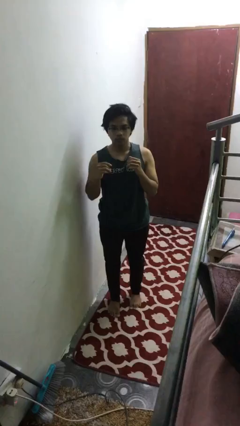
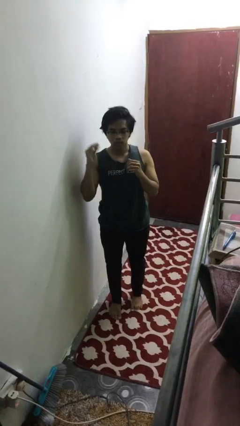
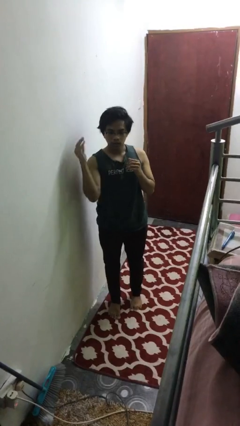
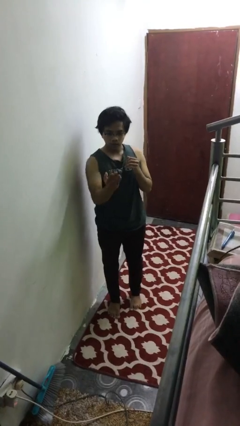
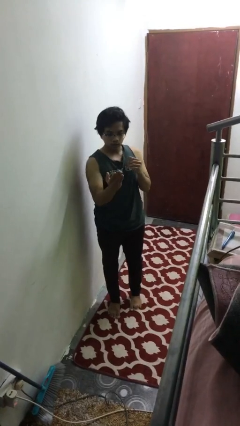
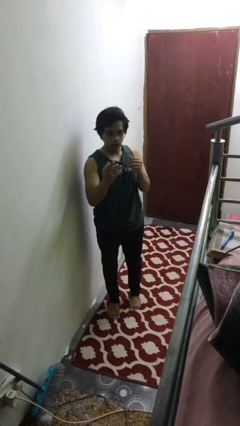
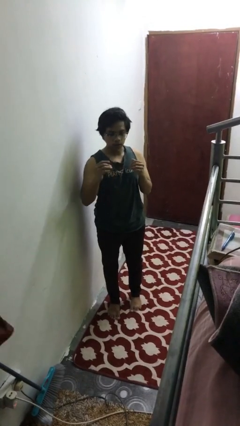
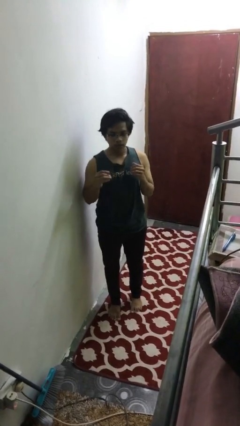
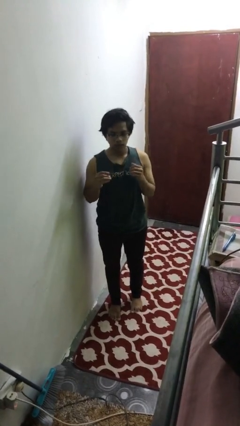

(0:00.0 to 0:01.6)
person karate chop

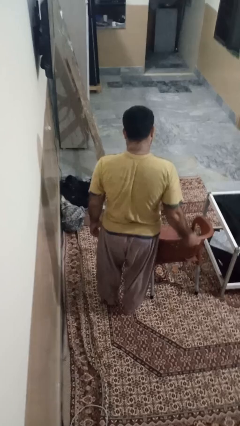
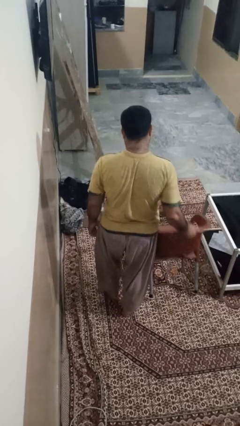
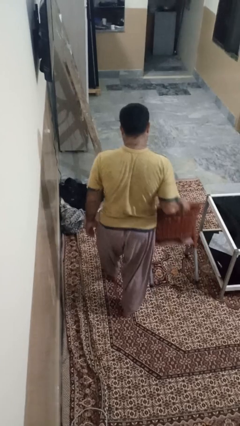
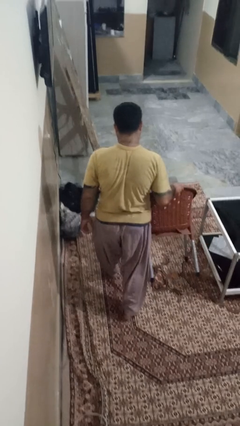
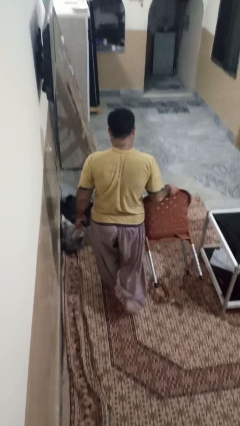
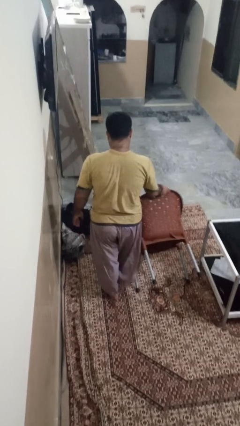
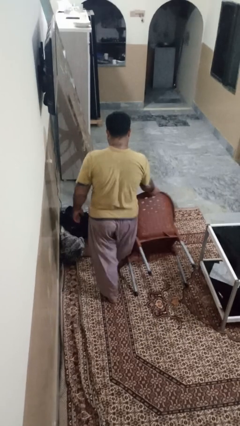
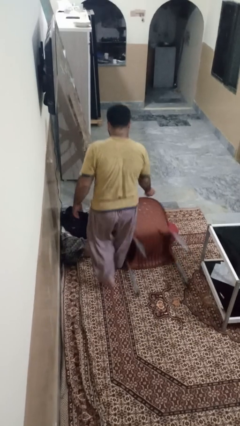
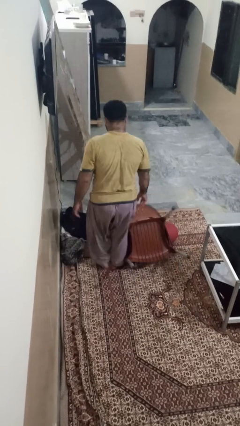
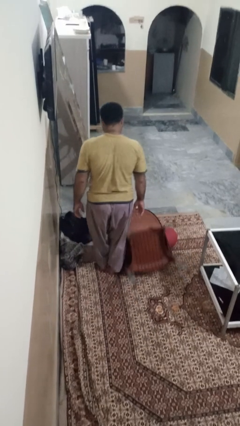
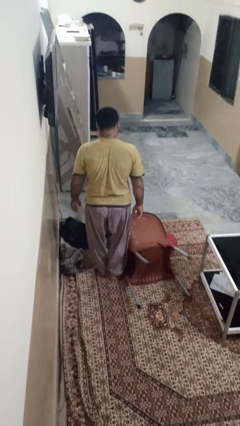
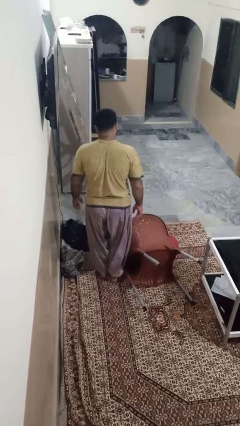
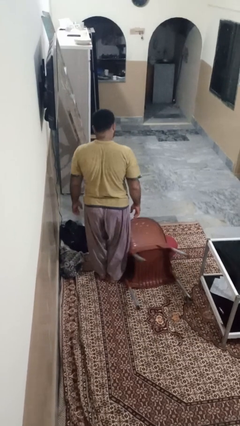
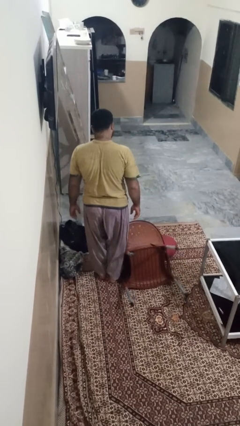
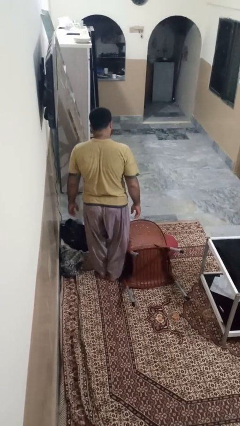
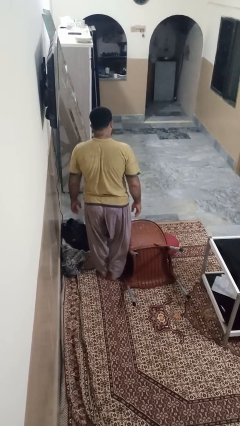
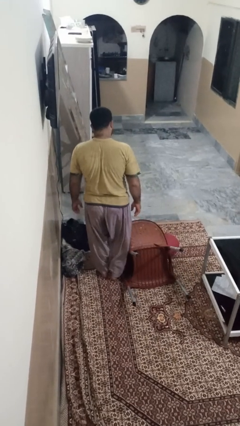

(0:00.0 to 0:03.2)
person knocks over furniture

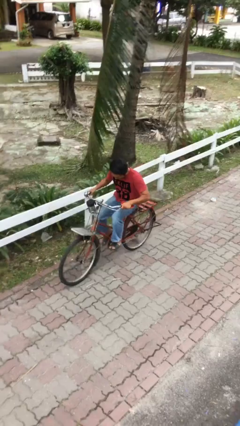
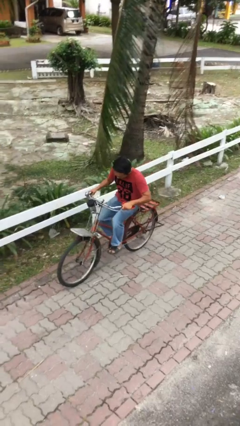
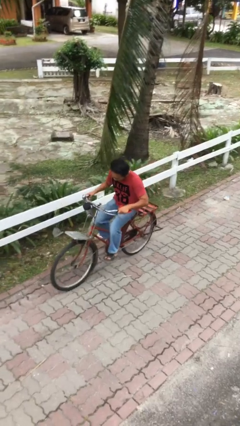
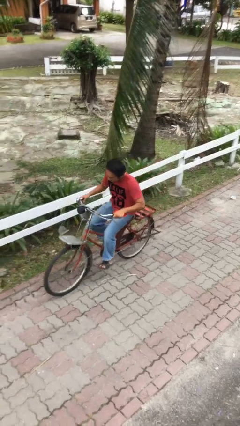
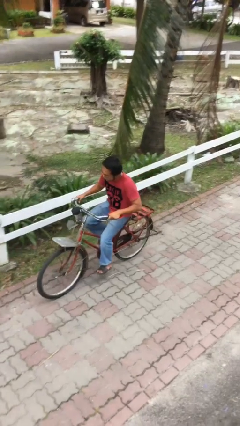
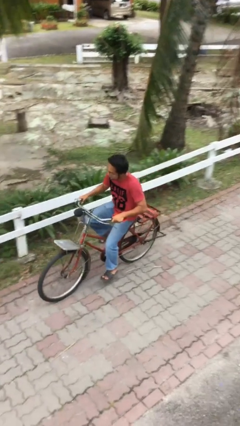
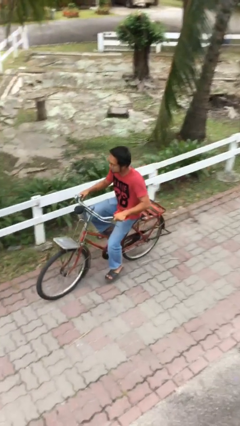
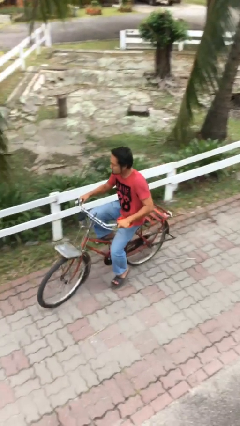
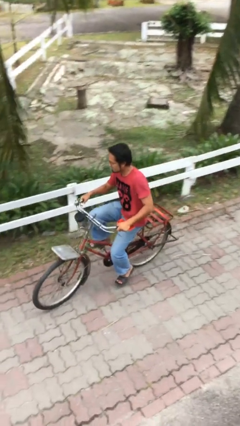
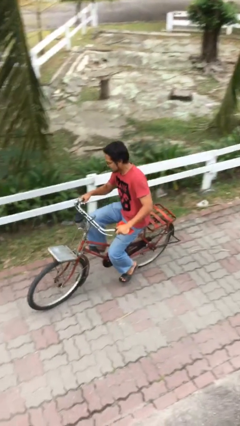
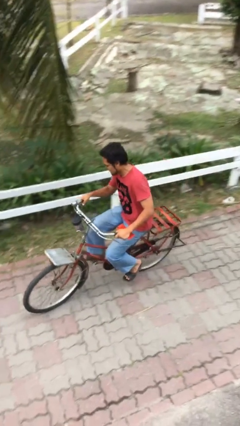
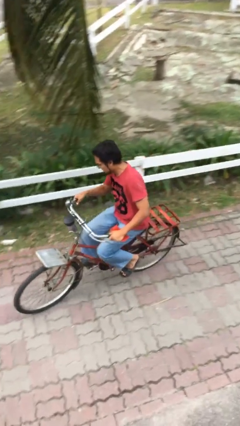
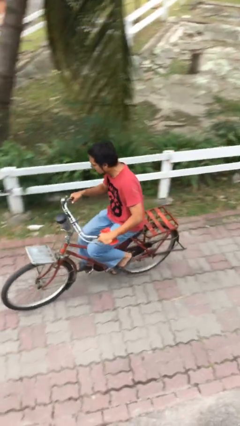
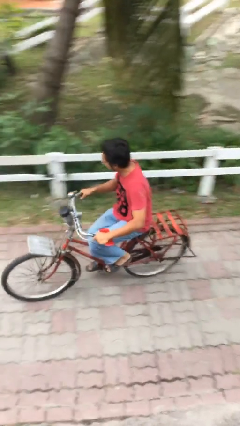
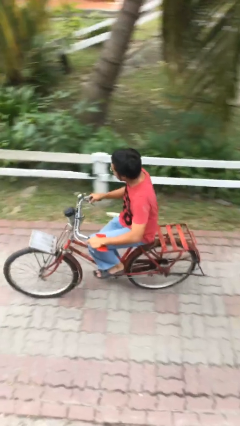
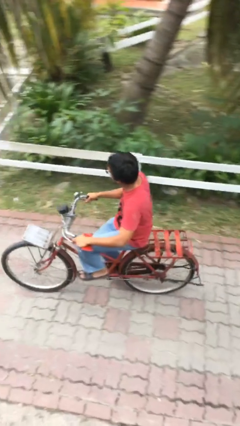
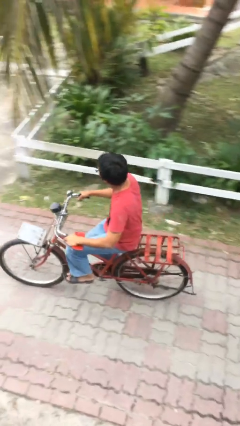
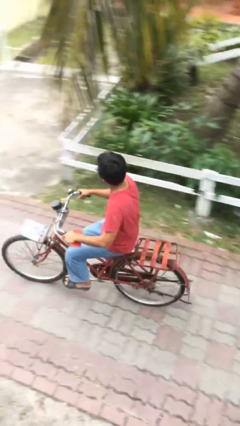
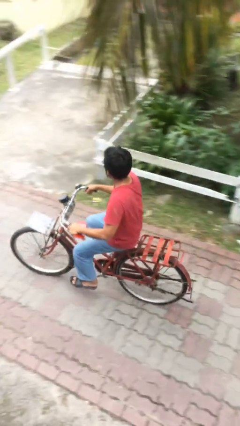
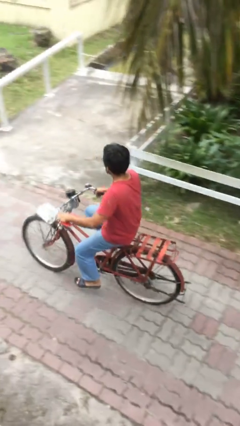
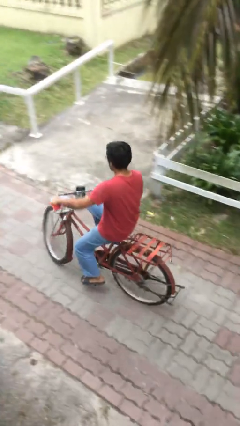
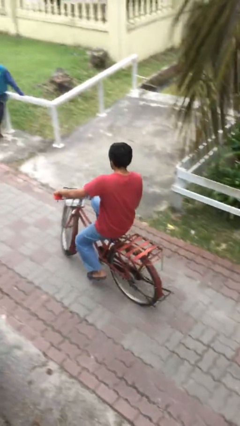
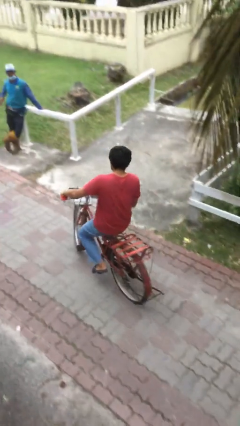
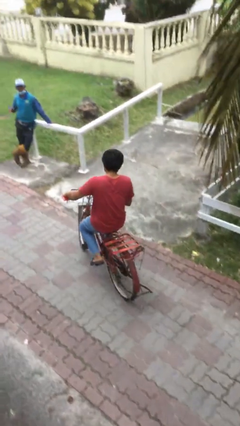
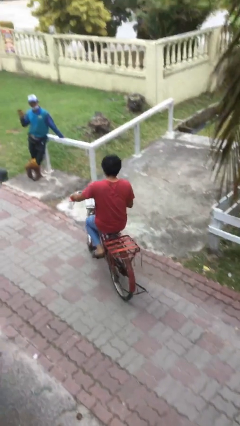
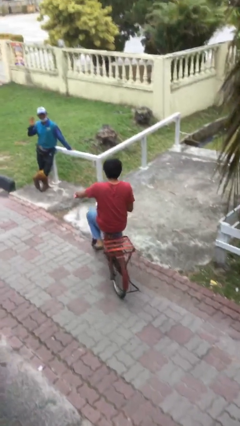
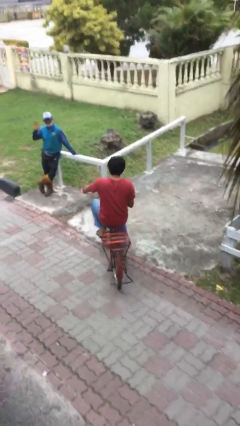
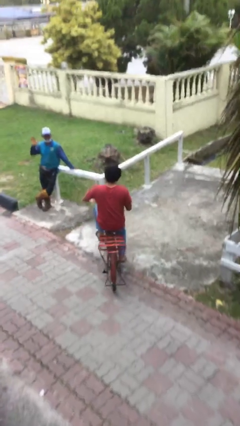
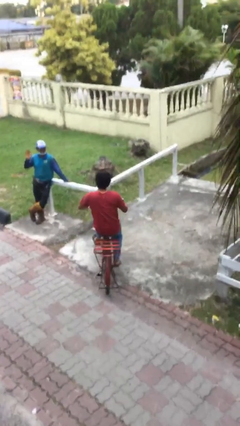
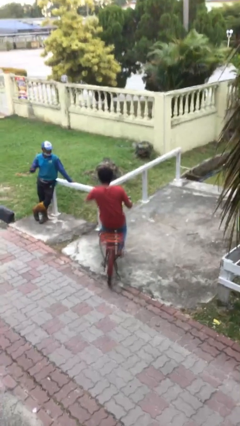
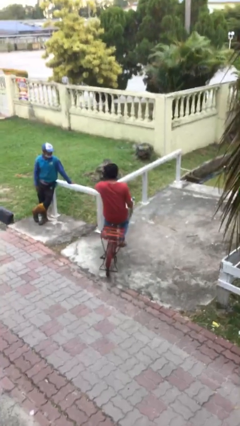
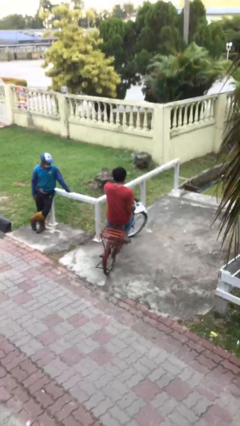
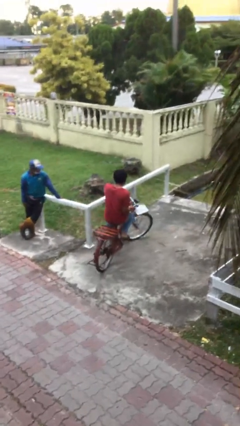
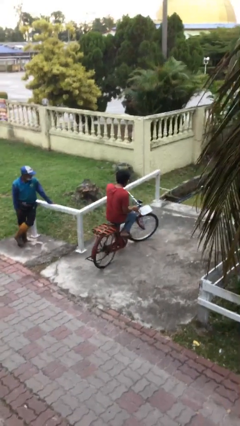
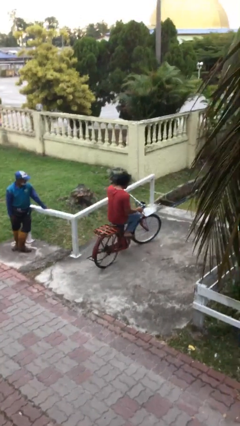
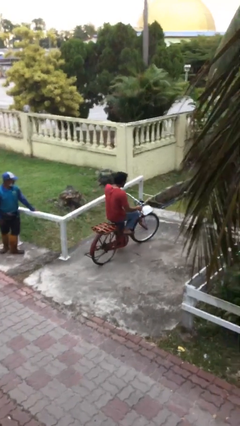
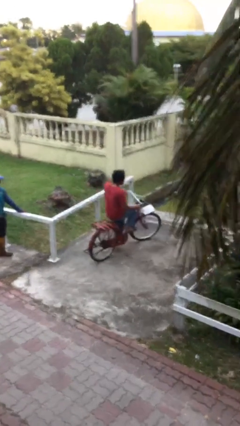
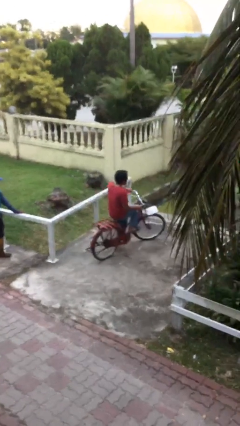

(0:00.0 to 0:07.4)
person rides bicycle

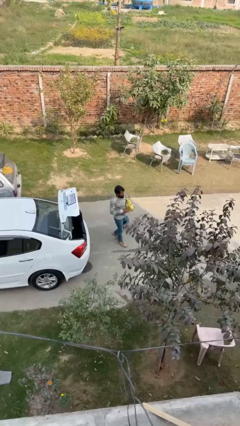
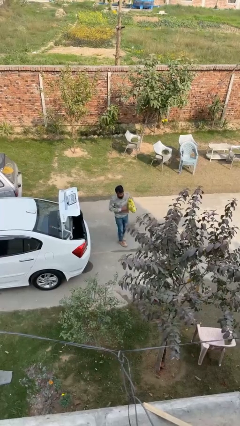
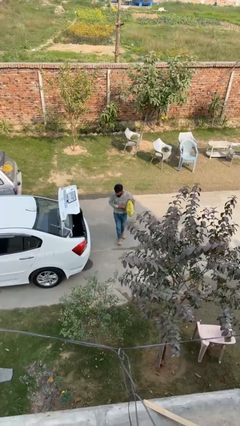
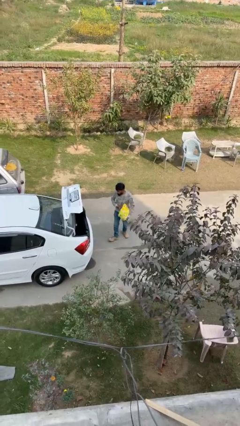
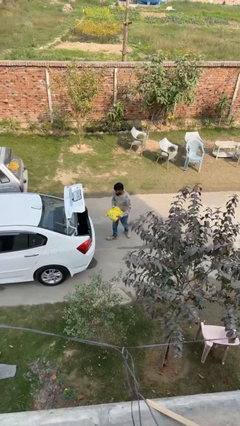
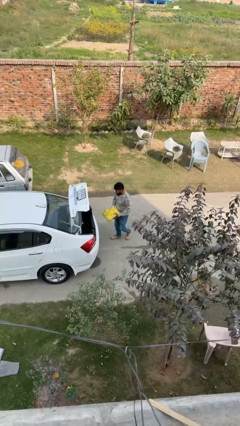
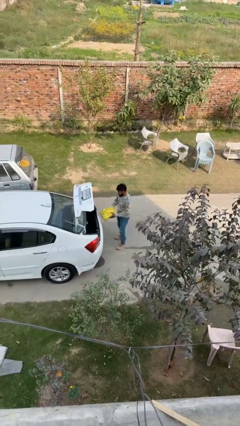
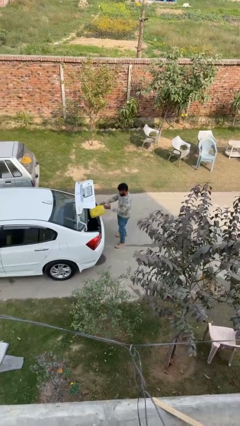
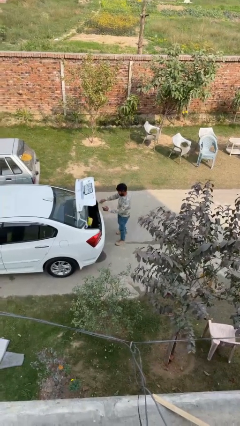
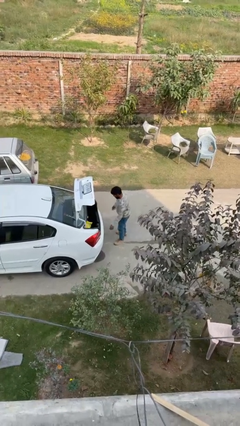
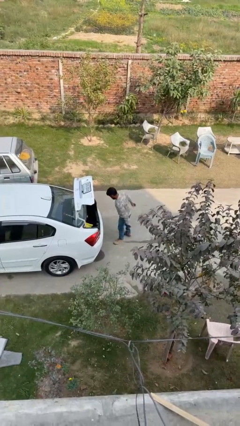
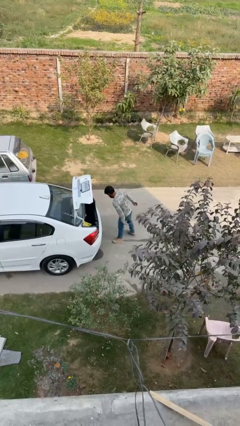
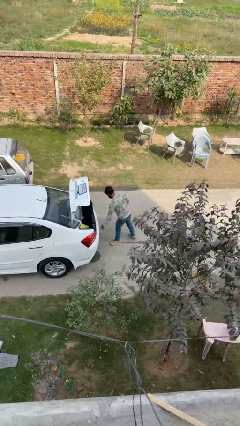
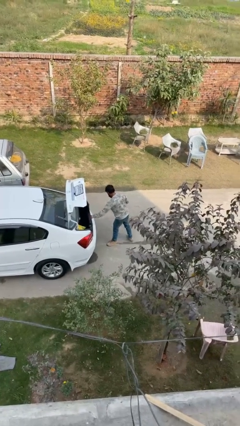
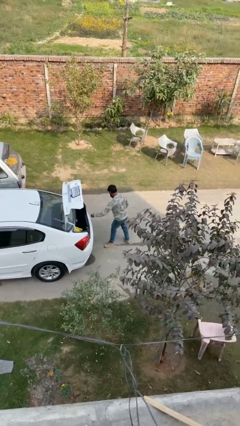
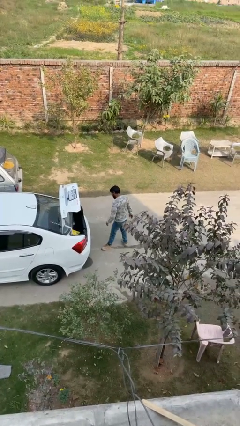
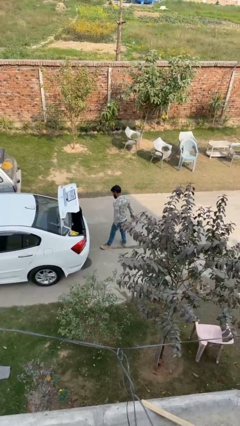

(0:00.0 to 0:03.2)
person loads car

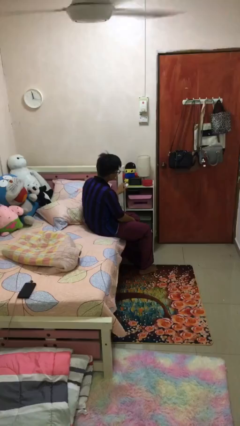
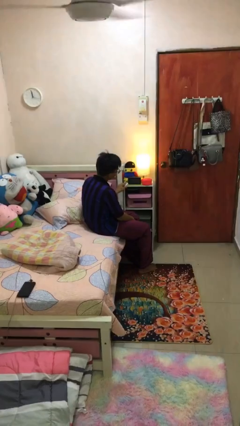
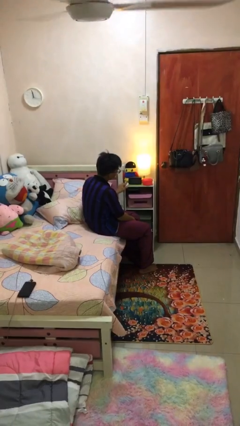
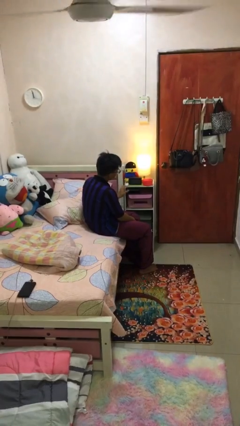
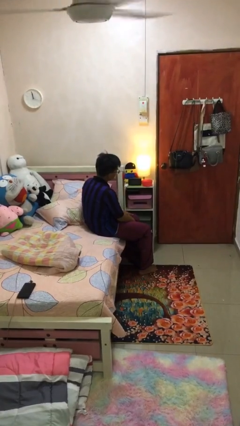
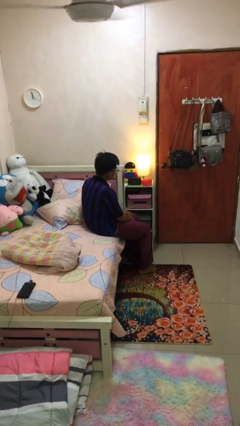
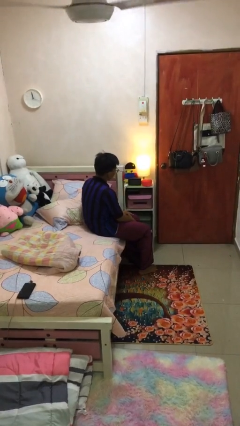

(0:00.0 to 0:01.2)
person turns on lamp

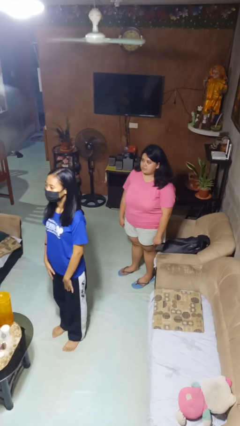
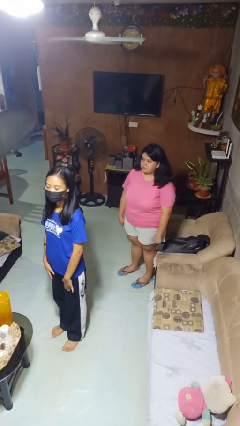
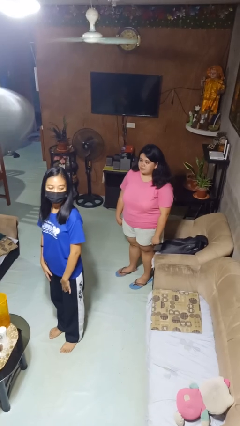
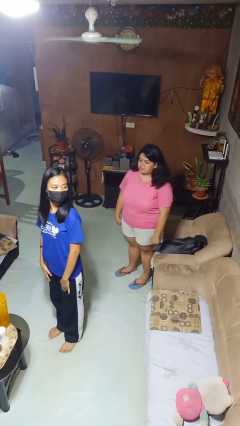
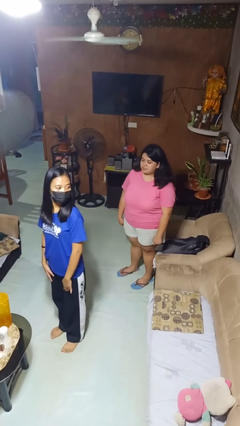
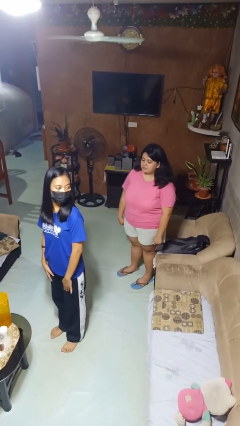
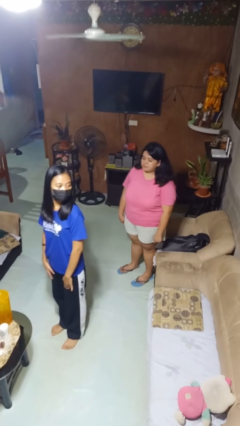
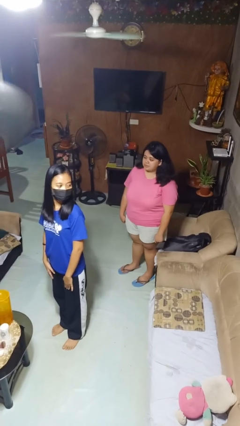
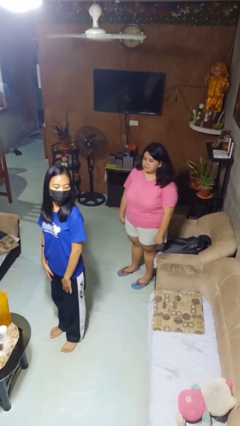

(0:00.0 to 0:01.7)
person looks over shoulder
